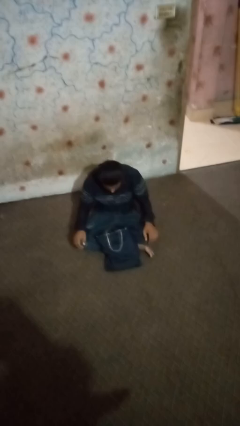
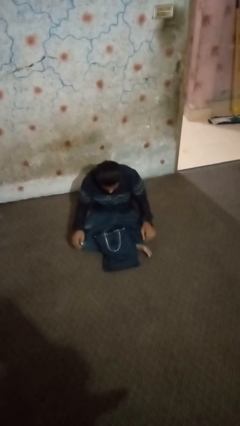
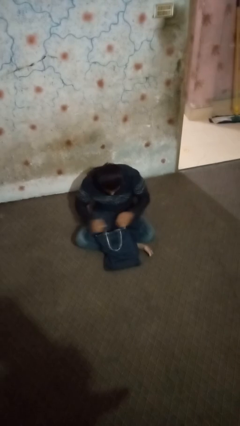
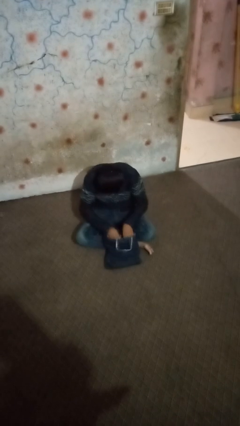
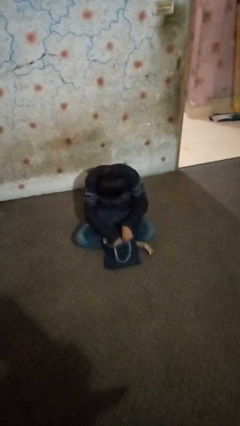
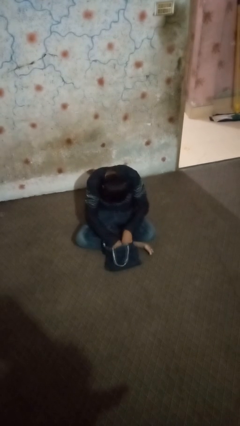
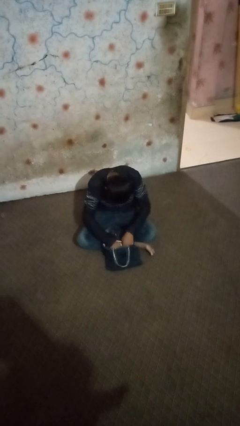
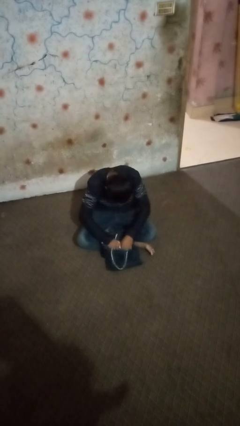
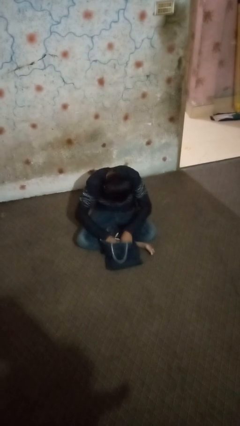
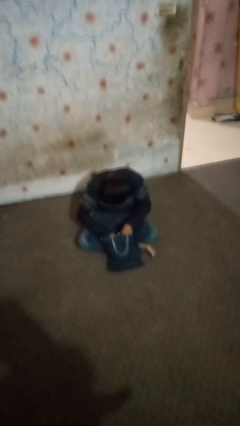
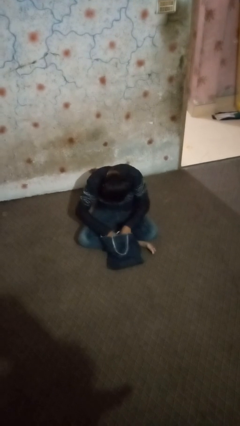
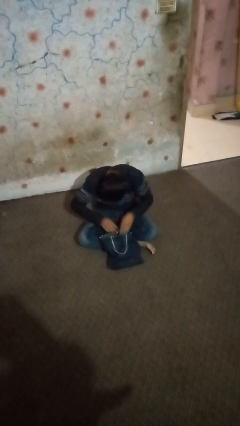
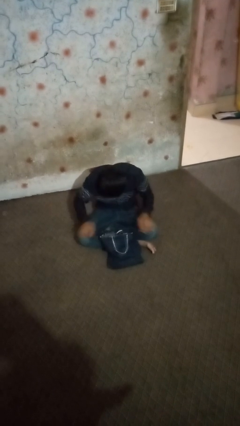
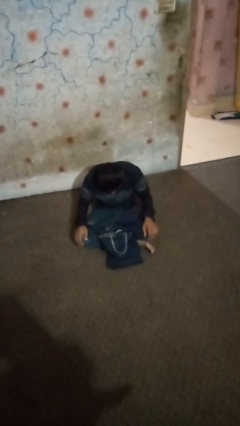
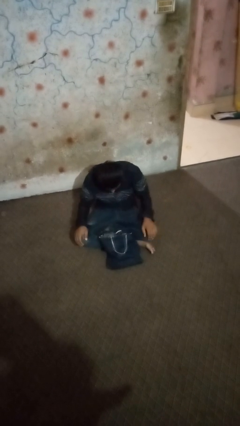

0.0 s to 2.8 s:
person searches in bag

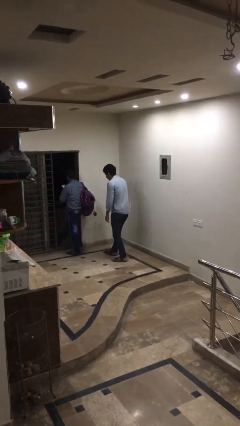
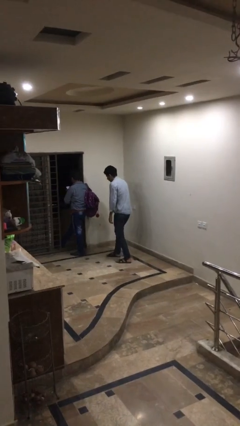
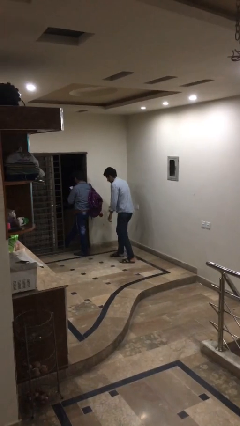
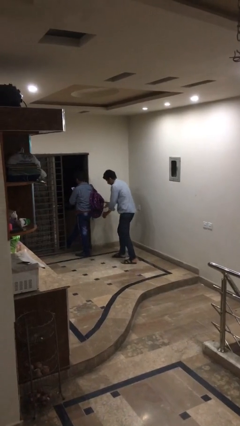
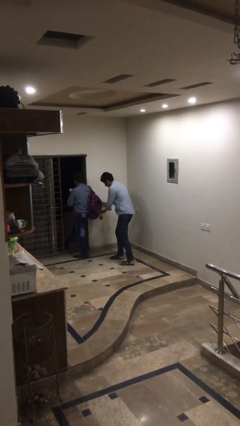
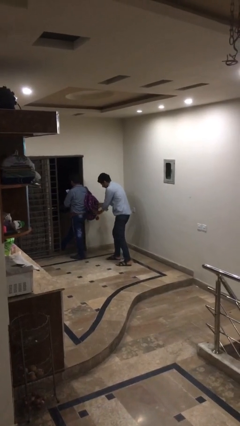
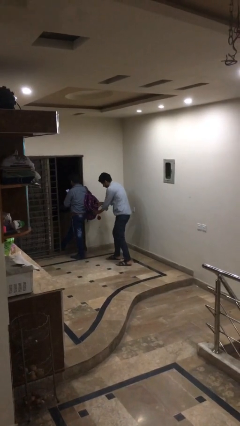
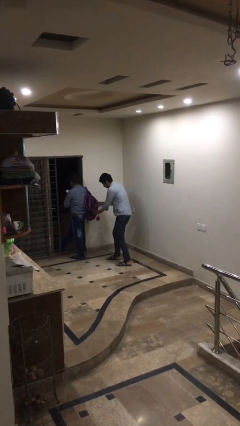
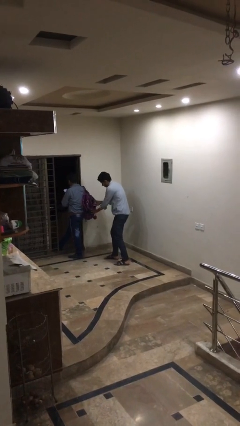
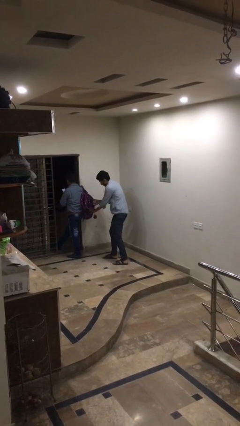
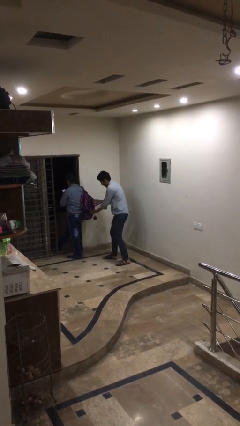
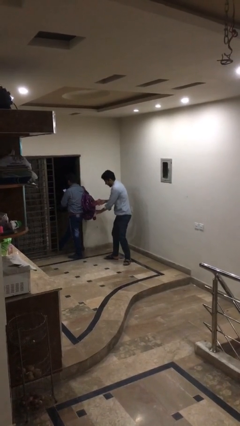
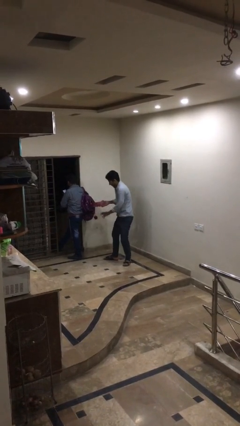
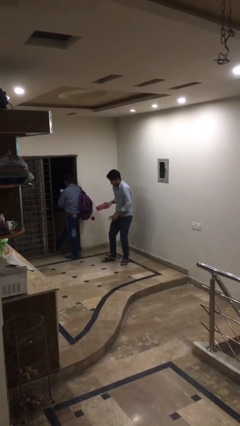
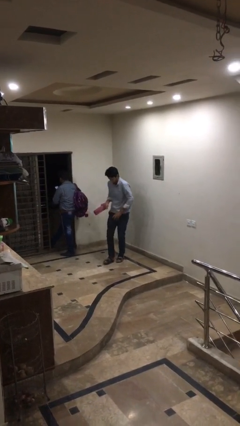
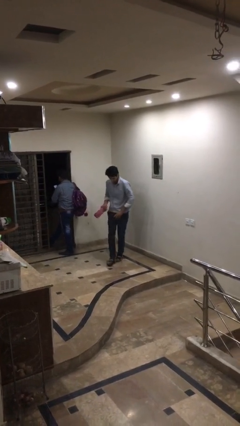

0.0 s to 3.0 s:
person steals object from person

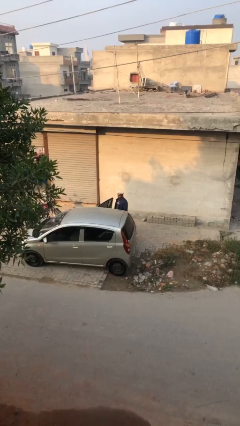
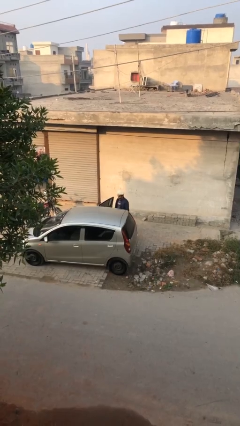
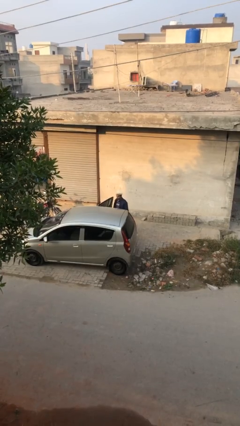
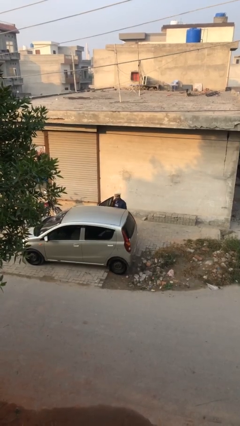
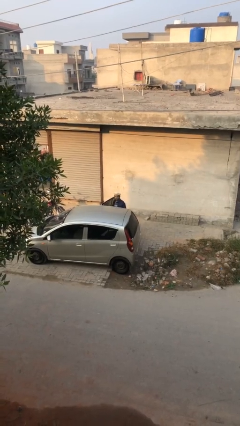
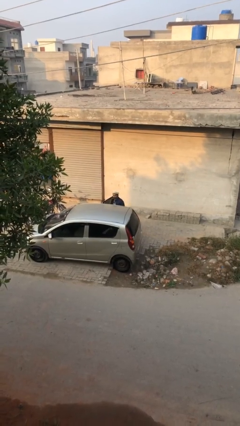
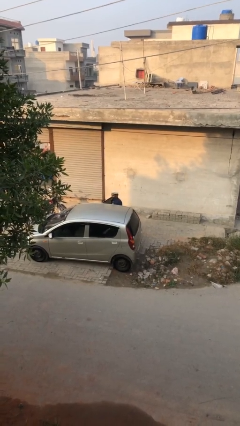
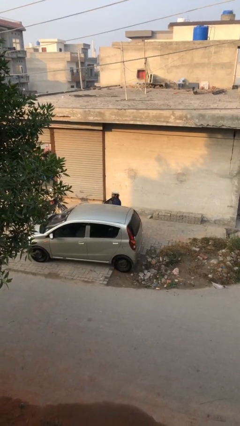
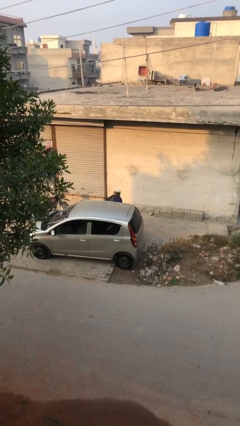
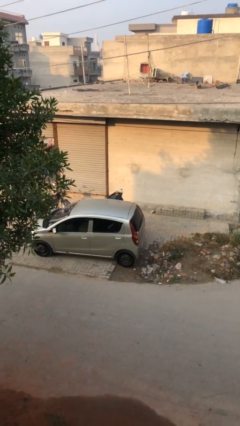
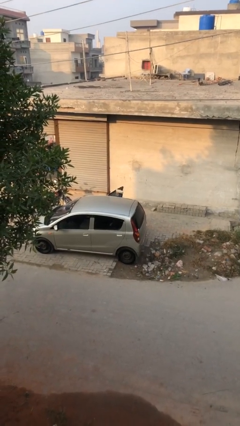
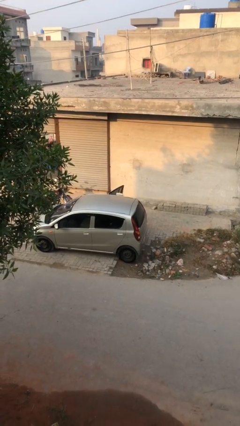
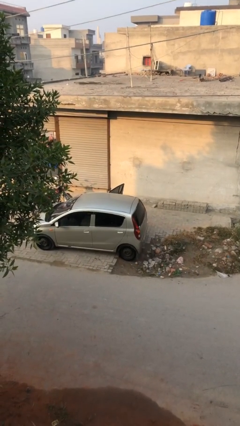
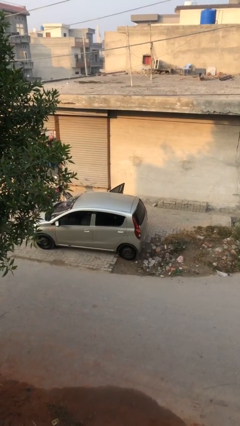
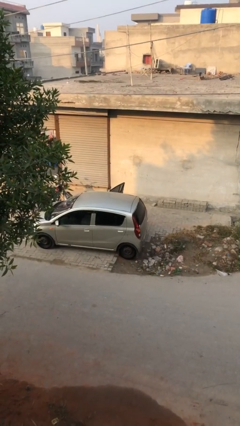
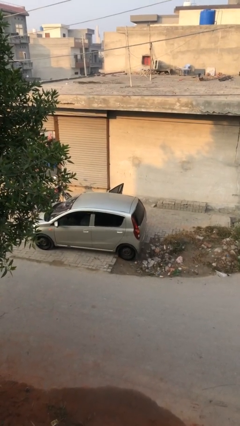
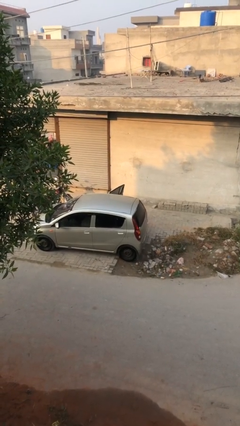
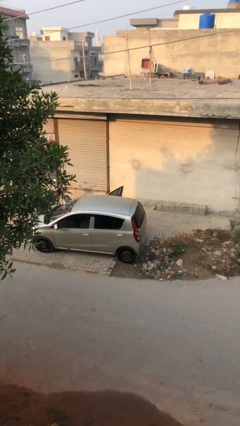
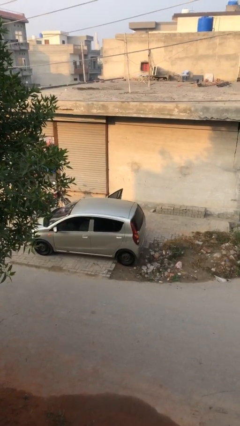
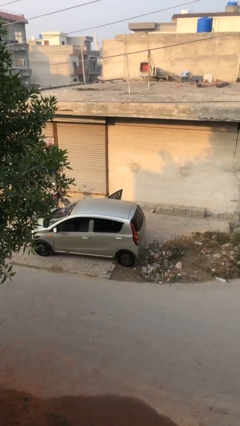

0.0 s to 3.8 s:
person enters car

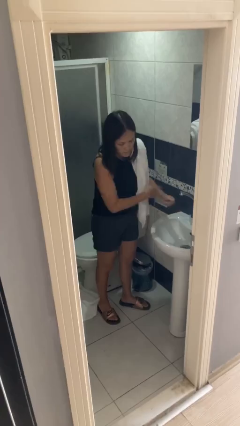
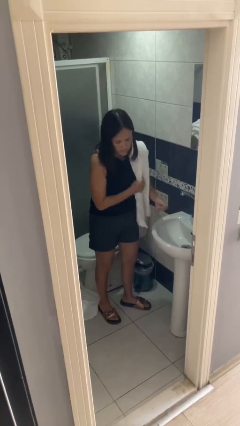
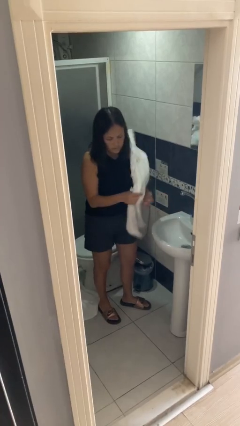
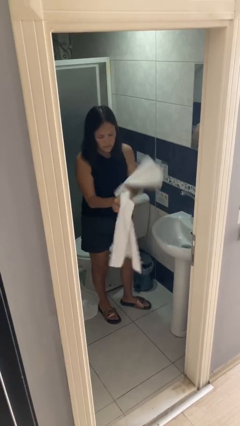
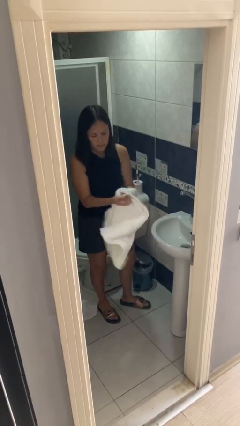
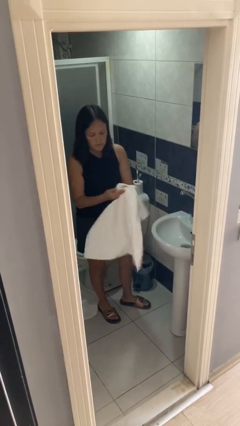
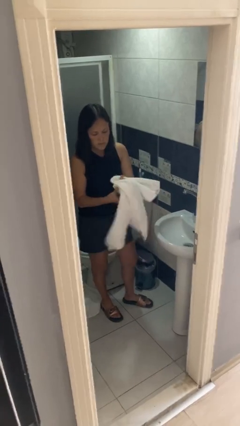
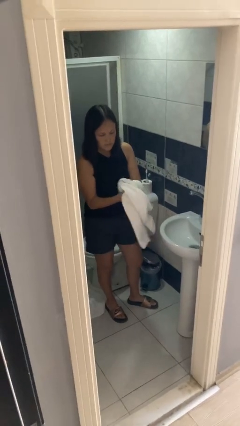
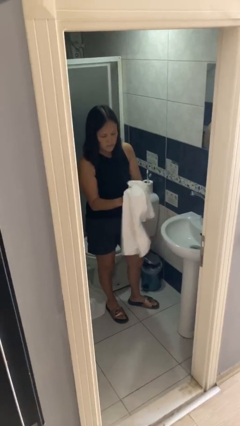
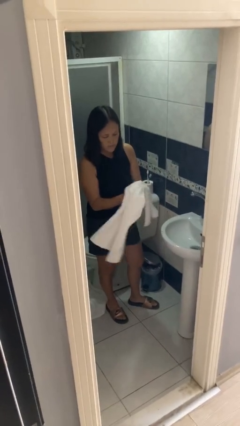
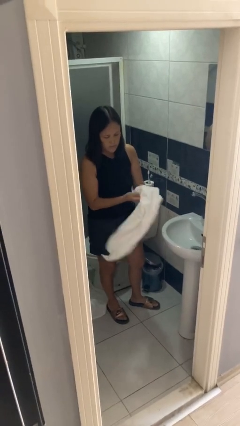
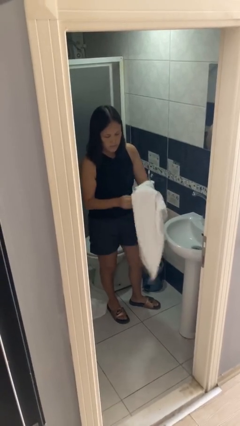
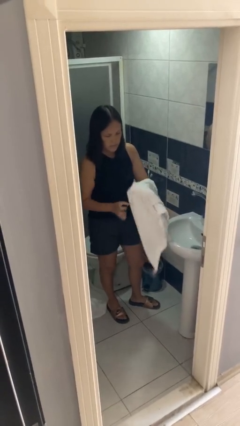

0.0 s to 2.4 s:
person dries hands with towel

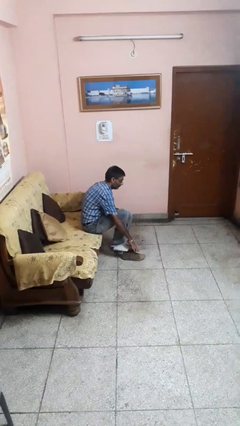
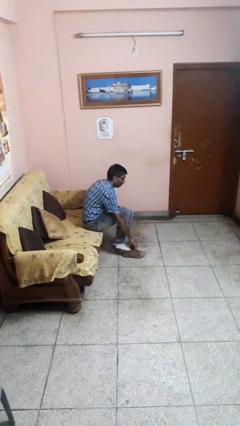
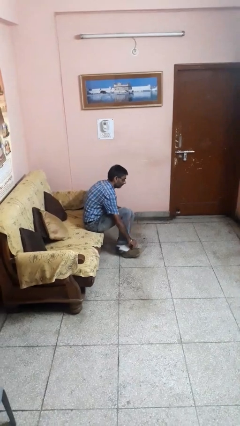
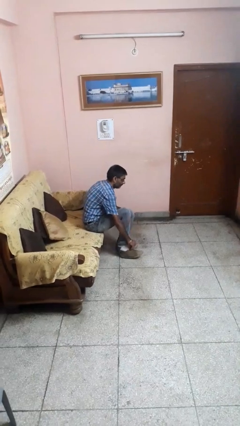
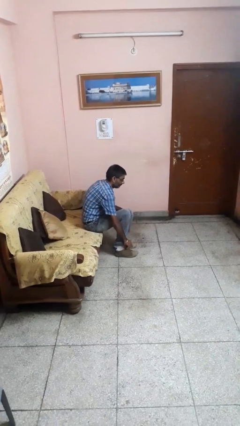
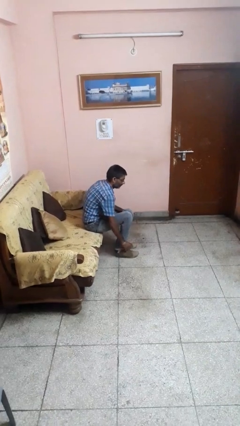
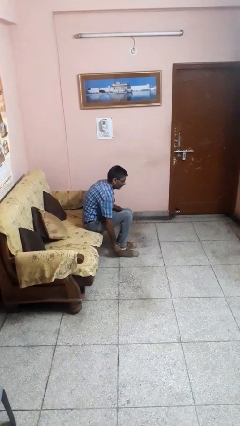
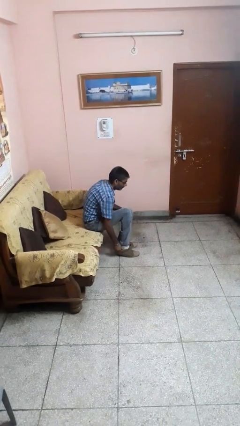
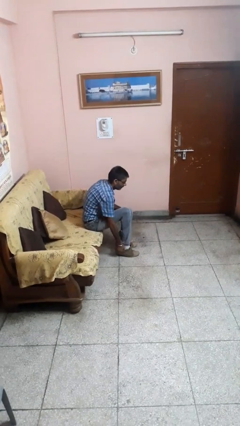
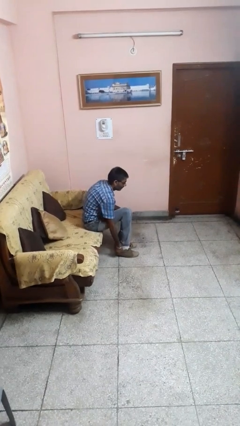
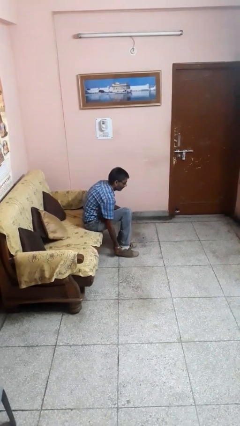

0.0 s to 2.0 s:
person puts on shoes

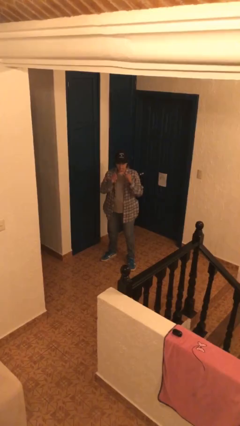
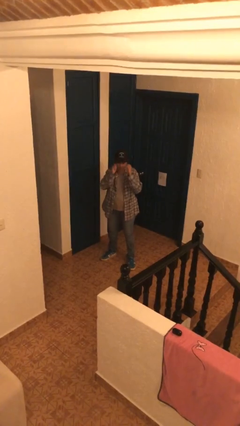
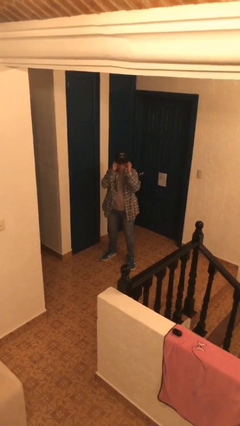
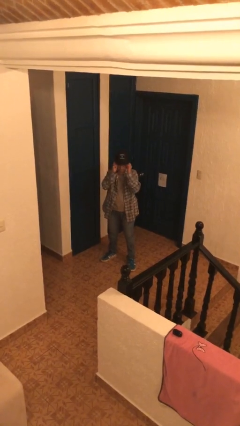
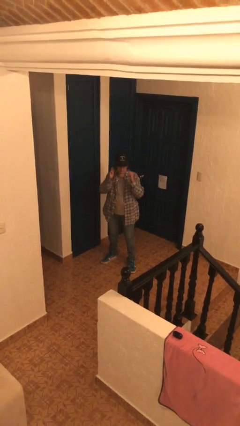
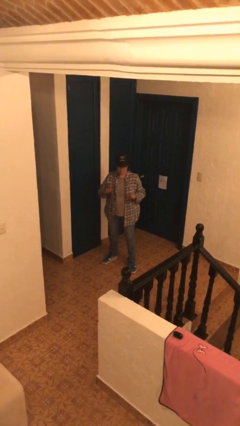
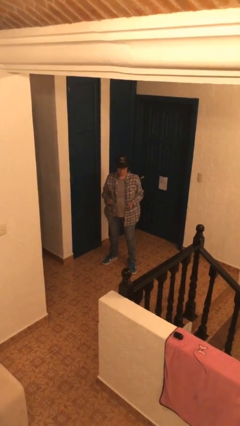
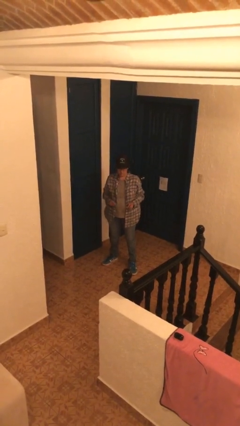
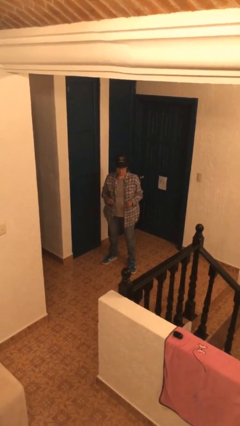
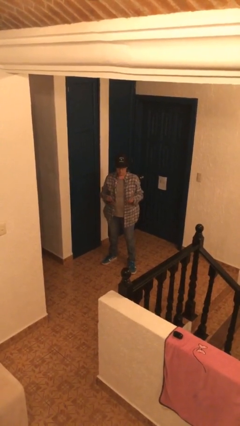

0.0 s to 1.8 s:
person puts on glasses

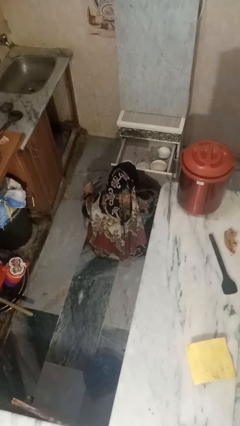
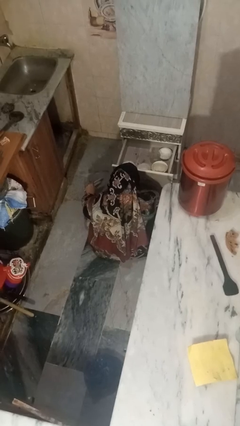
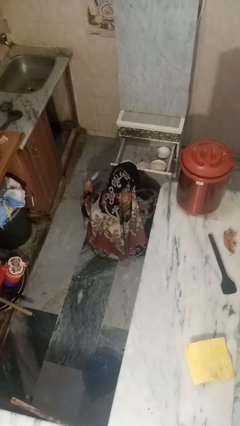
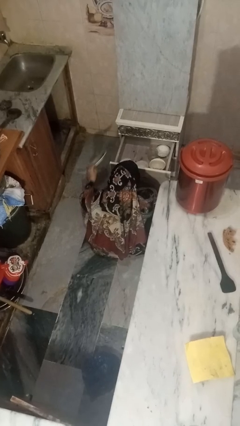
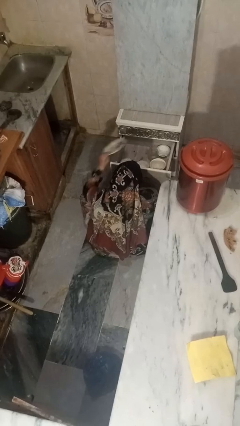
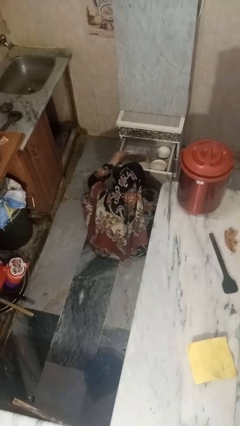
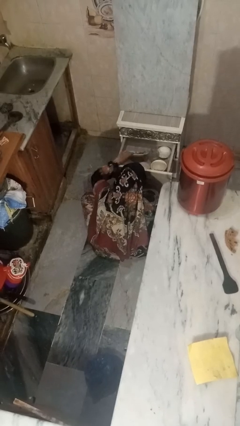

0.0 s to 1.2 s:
person puts object into kitchen drawer
